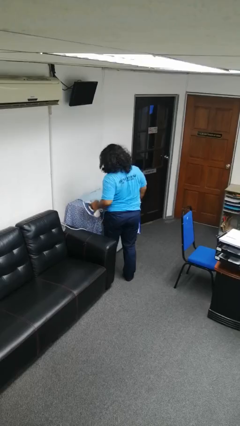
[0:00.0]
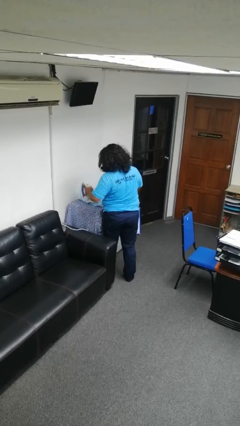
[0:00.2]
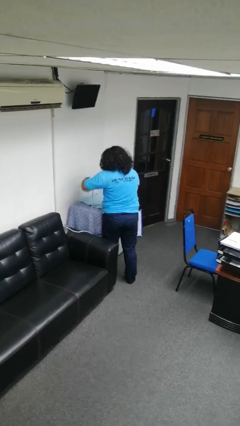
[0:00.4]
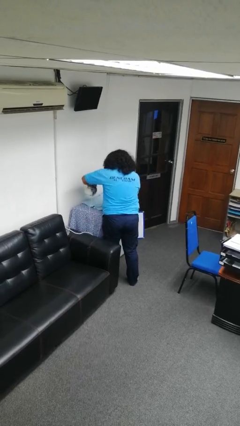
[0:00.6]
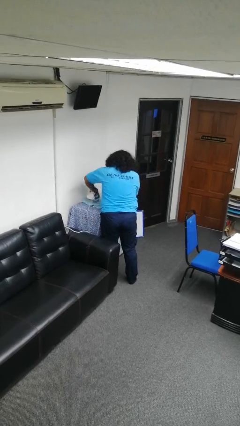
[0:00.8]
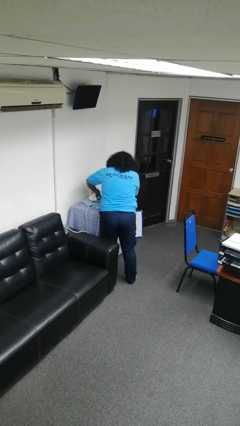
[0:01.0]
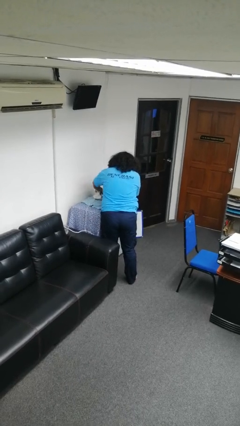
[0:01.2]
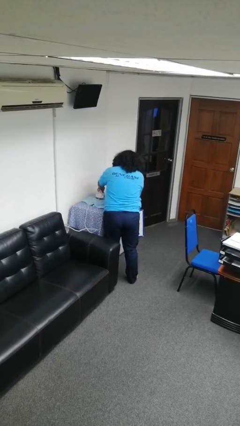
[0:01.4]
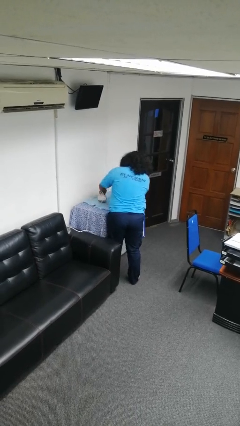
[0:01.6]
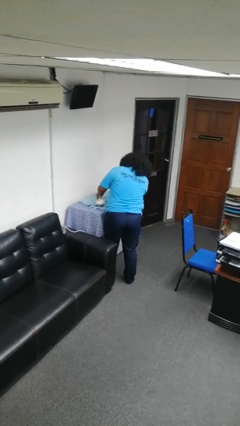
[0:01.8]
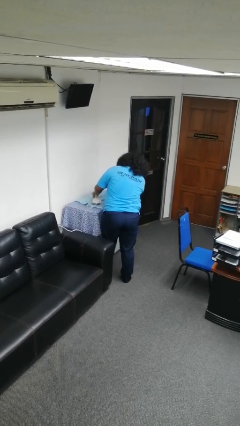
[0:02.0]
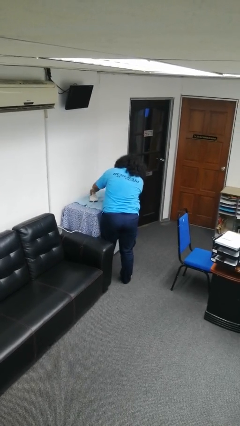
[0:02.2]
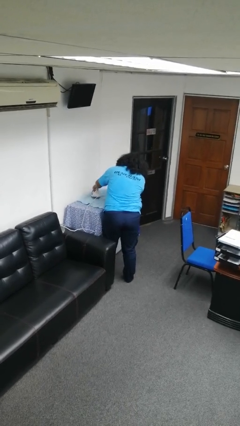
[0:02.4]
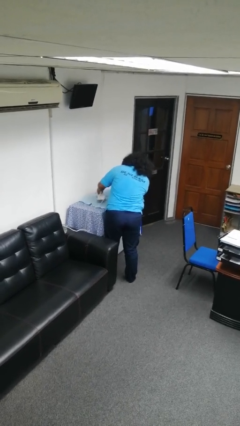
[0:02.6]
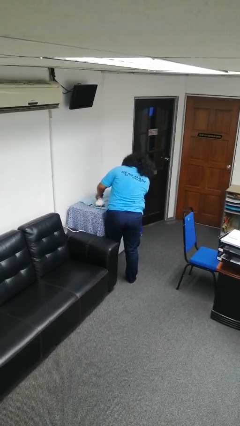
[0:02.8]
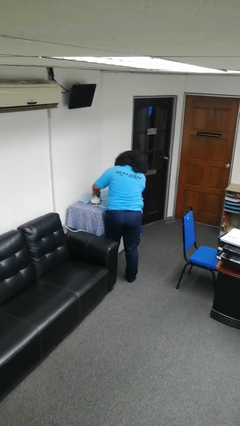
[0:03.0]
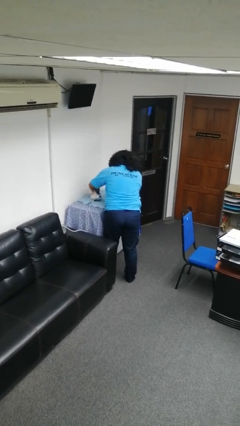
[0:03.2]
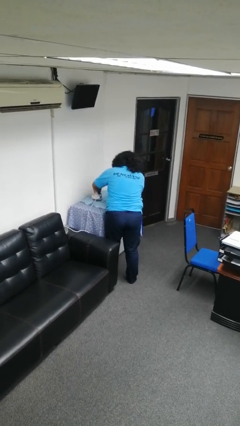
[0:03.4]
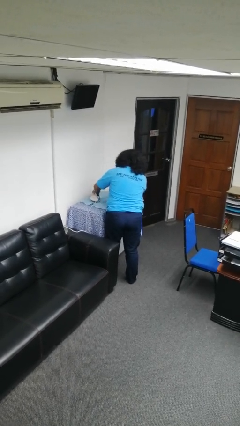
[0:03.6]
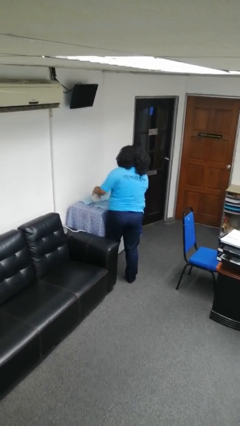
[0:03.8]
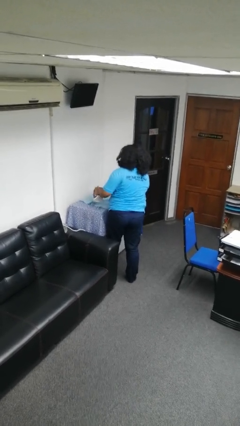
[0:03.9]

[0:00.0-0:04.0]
person irons clothes

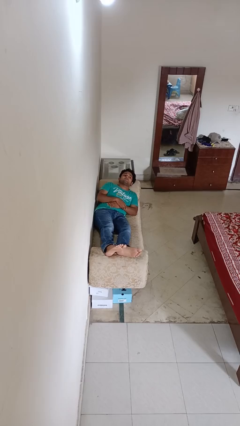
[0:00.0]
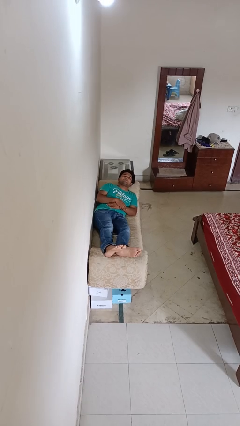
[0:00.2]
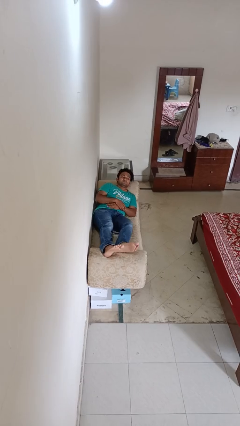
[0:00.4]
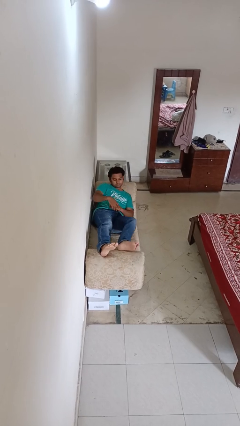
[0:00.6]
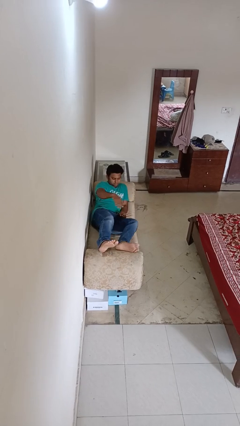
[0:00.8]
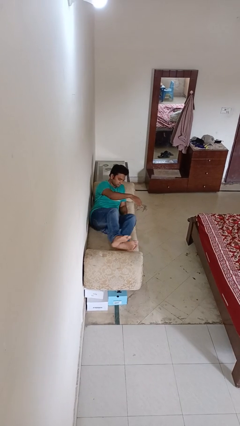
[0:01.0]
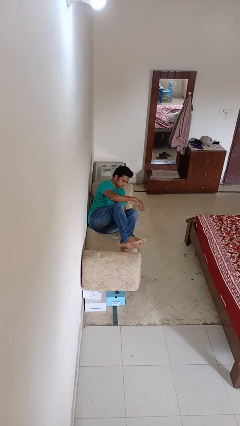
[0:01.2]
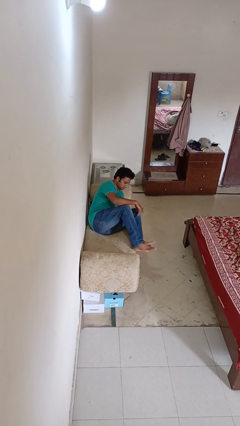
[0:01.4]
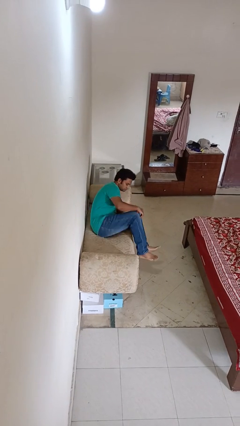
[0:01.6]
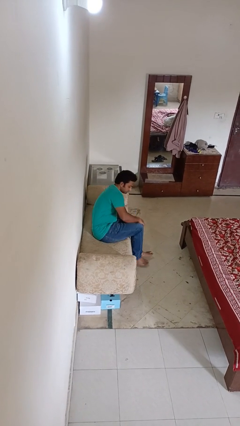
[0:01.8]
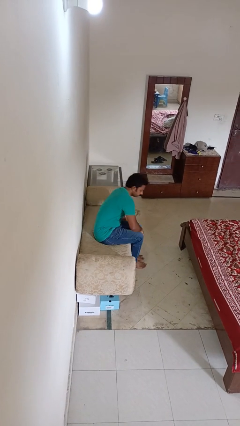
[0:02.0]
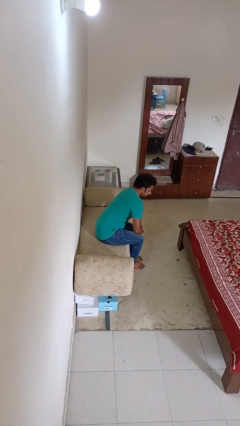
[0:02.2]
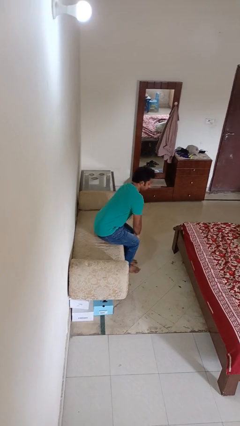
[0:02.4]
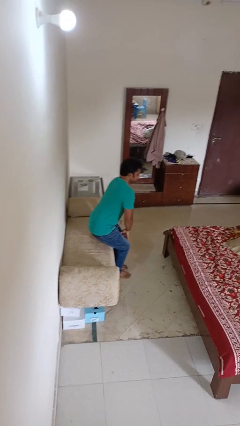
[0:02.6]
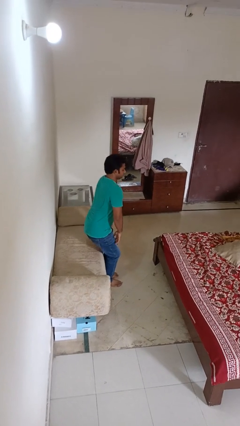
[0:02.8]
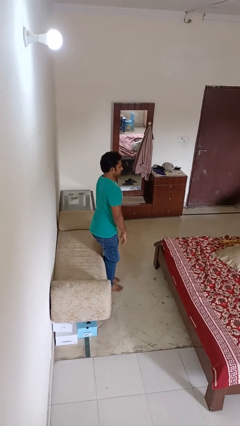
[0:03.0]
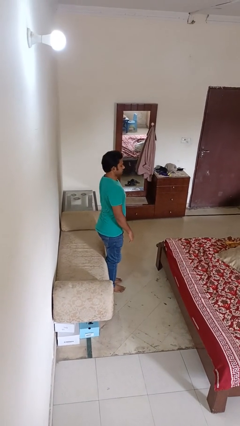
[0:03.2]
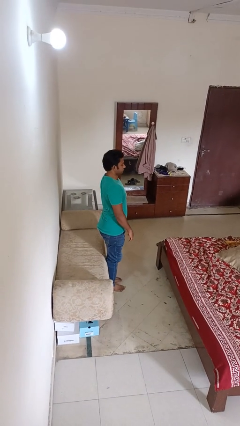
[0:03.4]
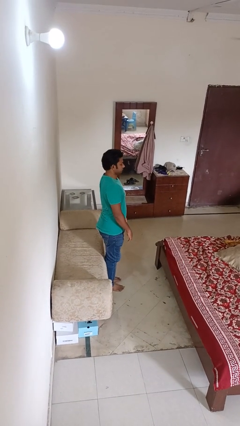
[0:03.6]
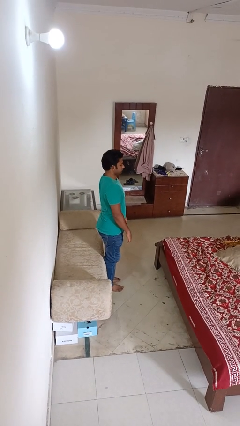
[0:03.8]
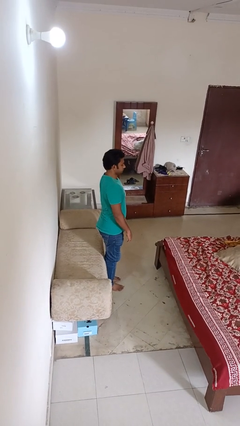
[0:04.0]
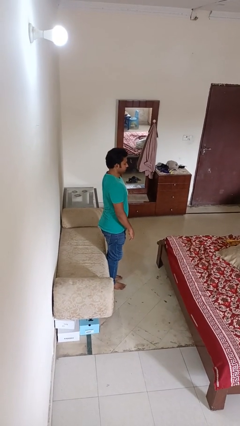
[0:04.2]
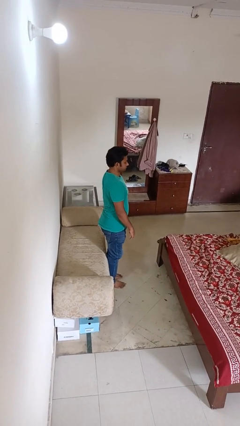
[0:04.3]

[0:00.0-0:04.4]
person stands up

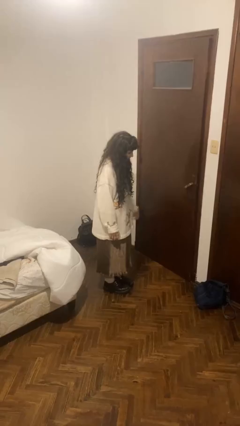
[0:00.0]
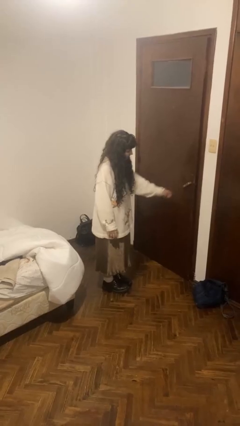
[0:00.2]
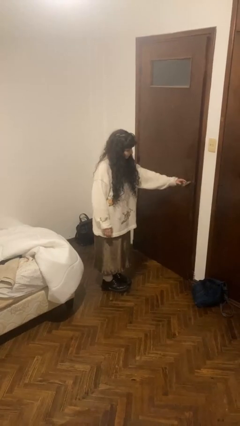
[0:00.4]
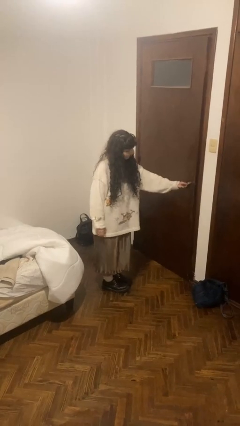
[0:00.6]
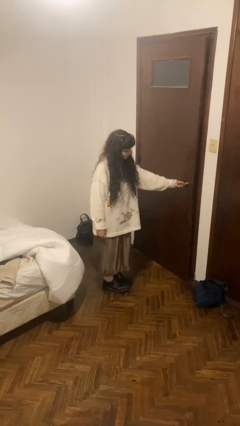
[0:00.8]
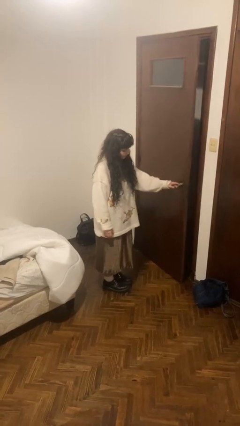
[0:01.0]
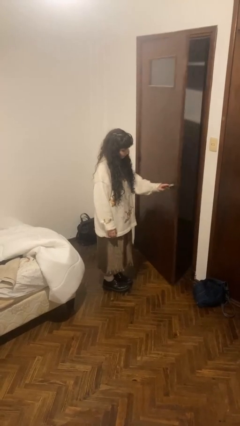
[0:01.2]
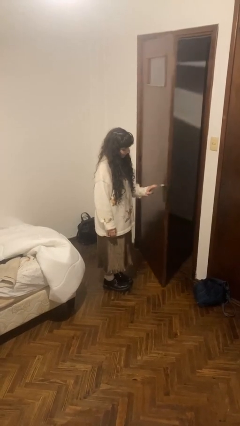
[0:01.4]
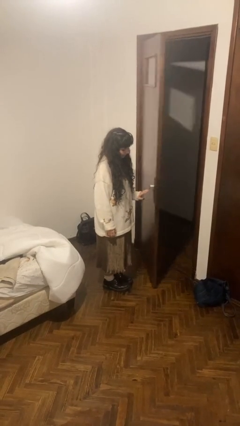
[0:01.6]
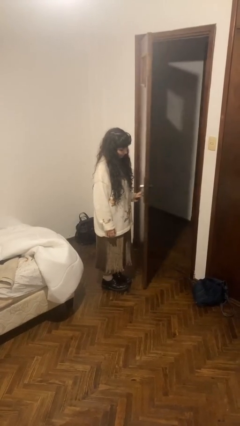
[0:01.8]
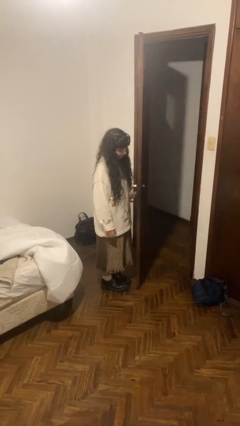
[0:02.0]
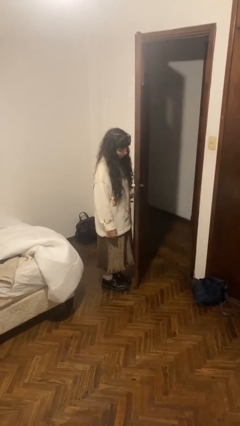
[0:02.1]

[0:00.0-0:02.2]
person opens facility door

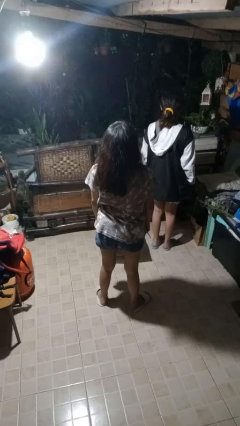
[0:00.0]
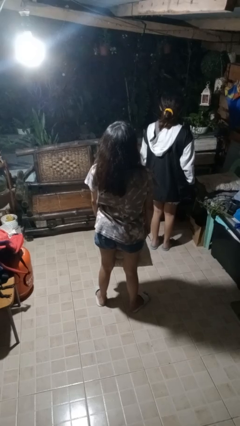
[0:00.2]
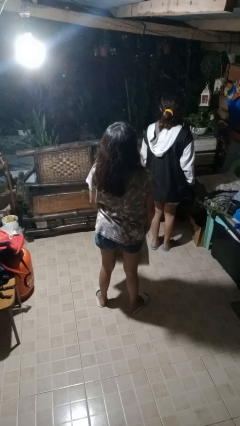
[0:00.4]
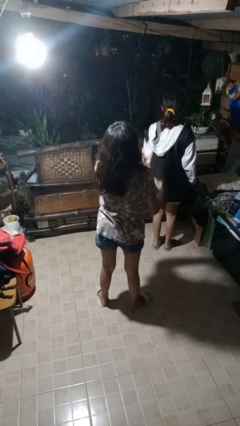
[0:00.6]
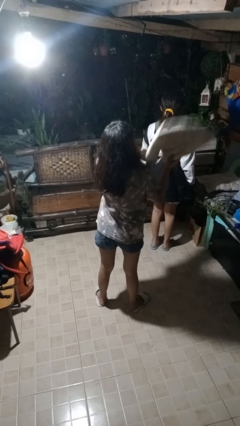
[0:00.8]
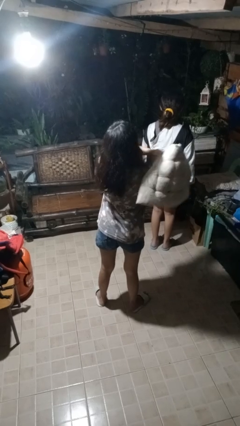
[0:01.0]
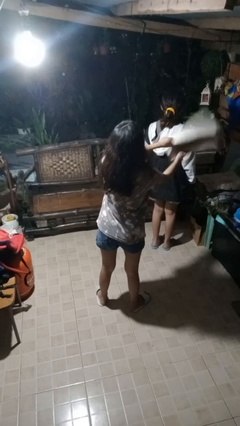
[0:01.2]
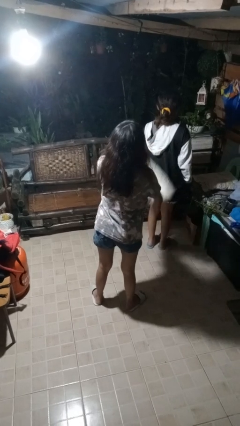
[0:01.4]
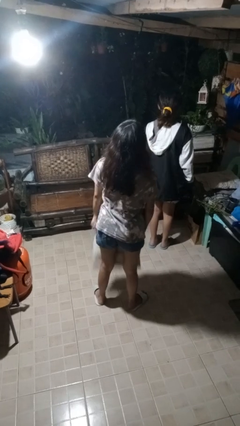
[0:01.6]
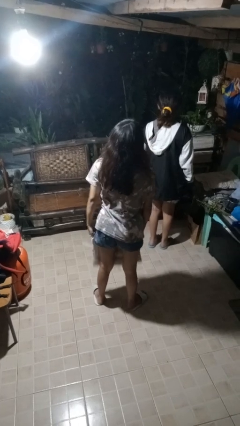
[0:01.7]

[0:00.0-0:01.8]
person hits person with pillow

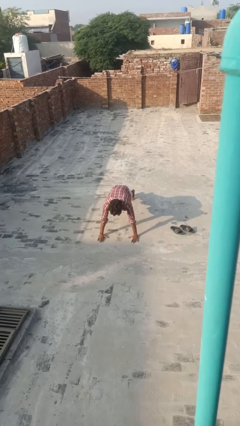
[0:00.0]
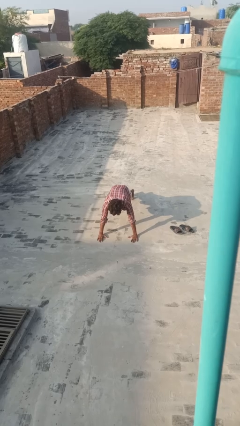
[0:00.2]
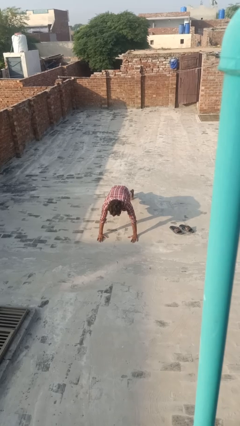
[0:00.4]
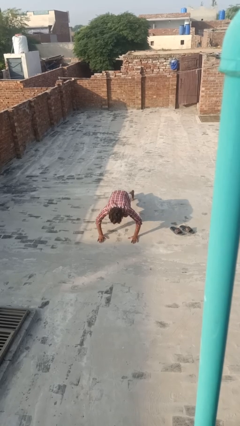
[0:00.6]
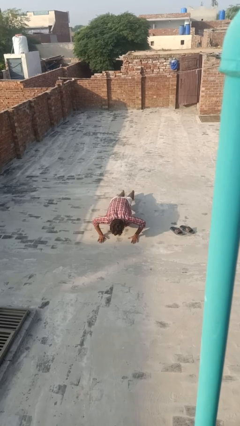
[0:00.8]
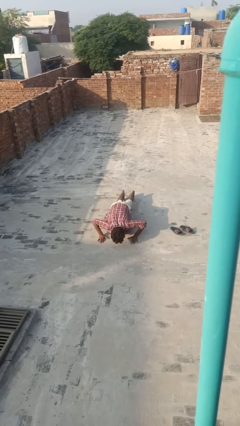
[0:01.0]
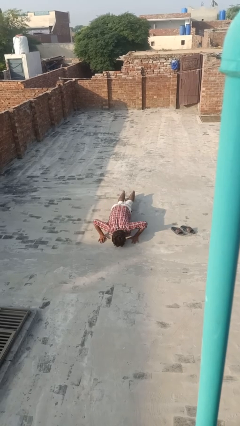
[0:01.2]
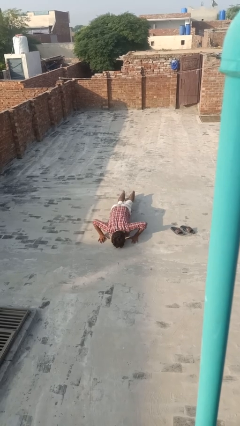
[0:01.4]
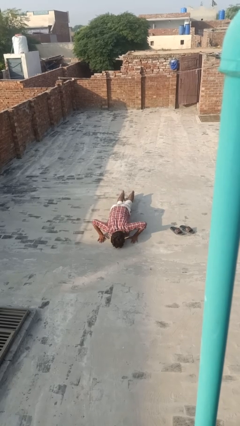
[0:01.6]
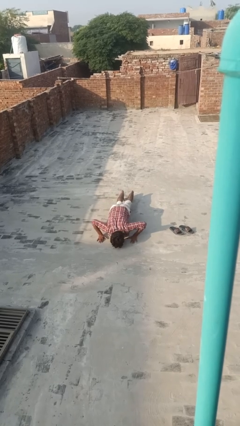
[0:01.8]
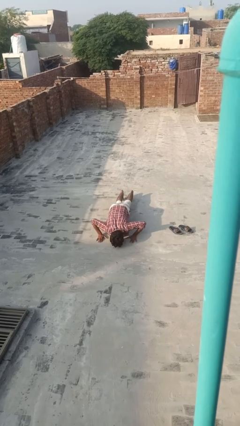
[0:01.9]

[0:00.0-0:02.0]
person exercises with pushup

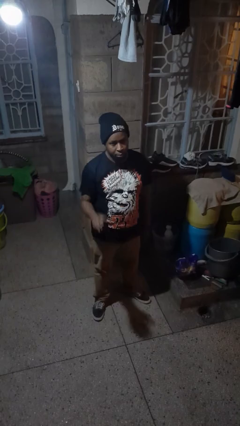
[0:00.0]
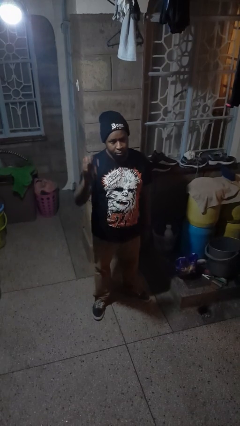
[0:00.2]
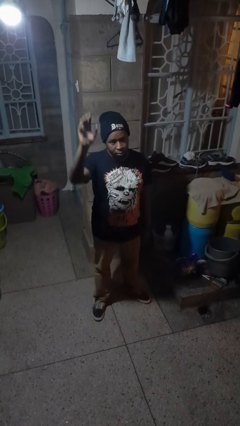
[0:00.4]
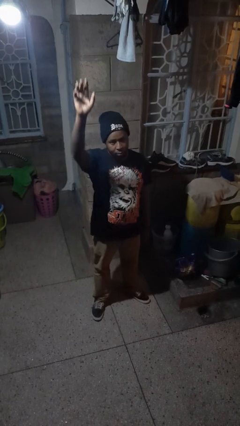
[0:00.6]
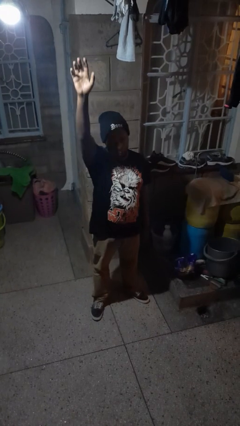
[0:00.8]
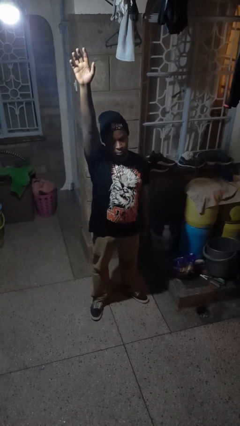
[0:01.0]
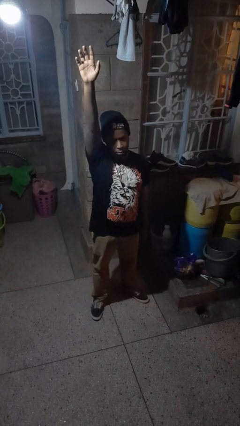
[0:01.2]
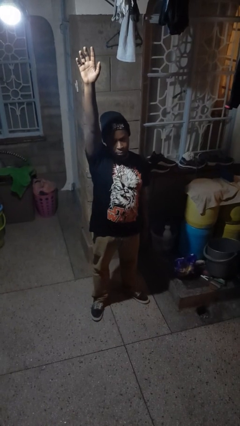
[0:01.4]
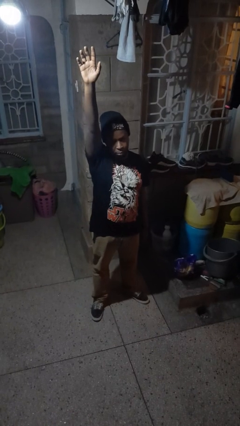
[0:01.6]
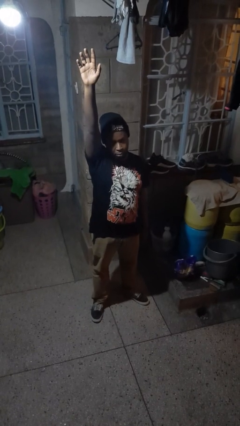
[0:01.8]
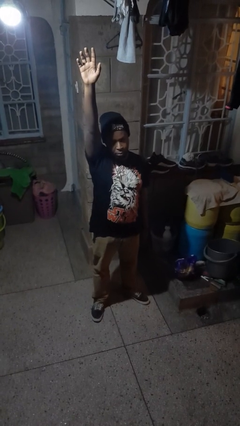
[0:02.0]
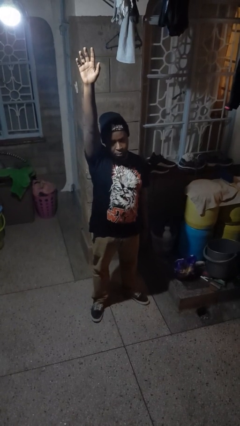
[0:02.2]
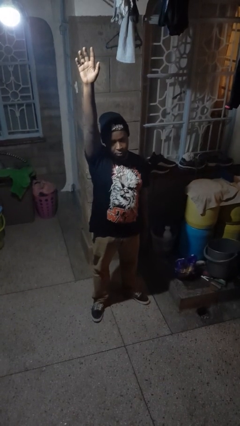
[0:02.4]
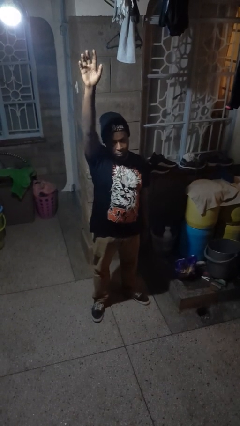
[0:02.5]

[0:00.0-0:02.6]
person gestures raise hand

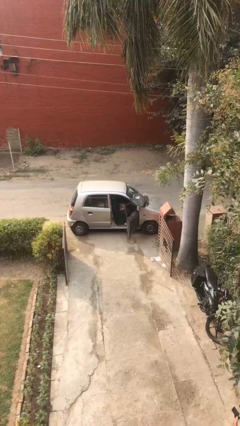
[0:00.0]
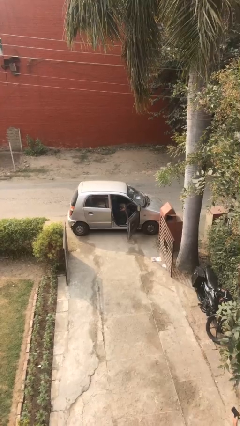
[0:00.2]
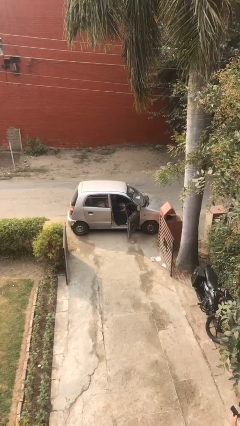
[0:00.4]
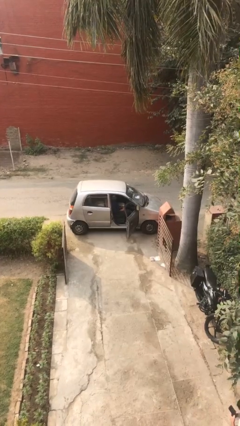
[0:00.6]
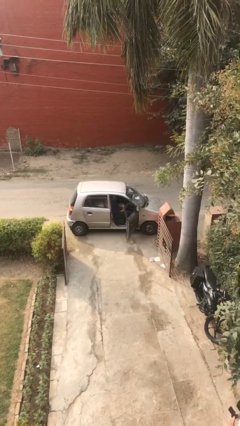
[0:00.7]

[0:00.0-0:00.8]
person exits car
